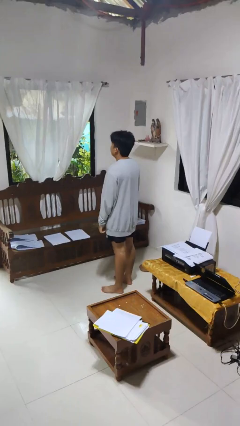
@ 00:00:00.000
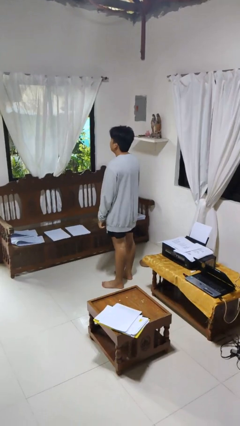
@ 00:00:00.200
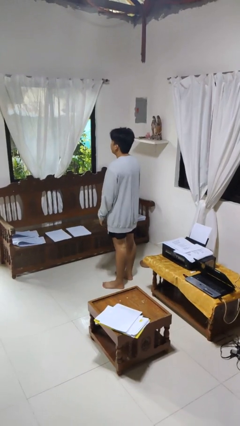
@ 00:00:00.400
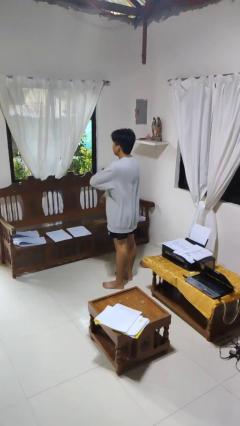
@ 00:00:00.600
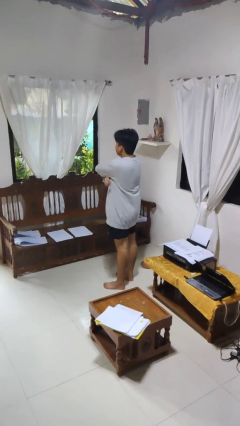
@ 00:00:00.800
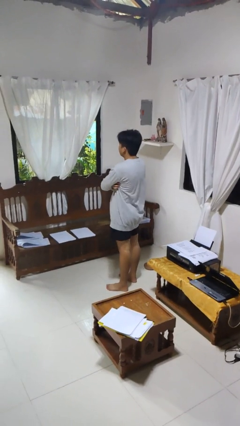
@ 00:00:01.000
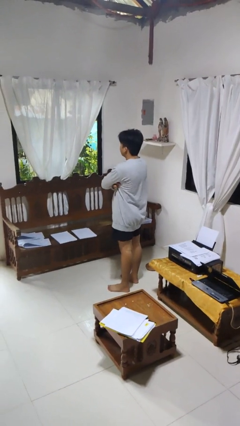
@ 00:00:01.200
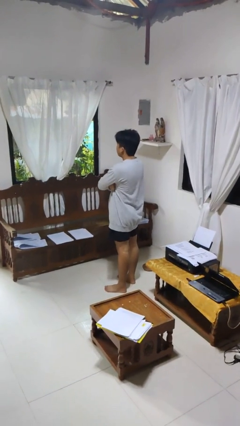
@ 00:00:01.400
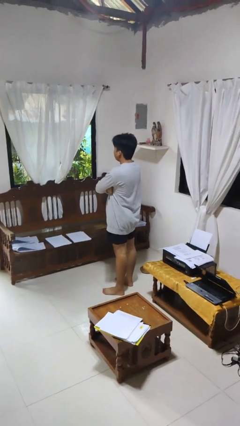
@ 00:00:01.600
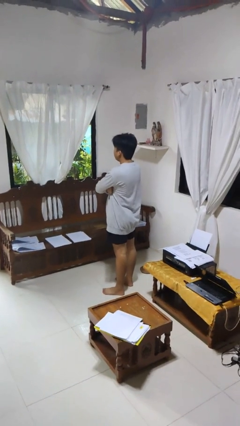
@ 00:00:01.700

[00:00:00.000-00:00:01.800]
person gestures arms x

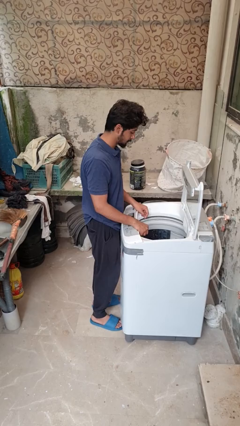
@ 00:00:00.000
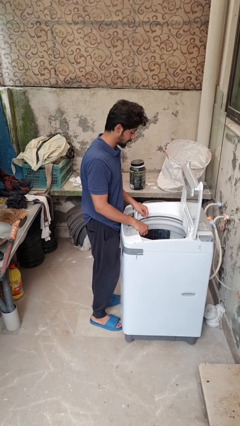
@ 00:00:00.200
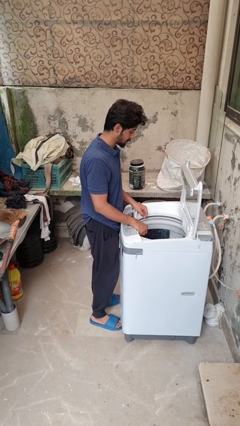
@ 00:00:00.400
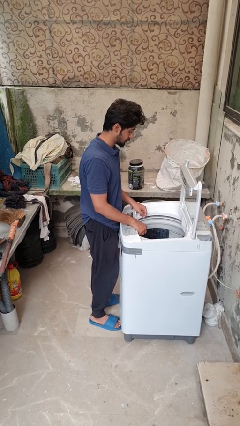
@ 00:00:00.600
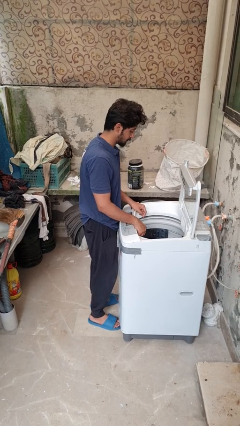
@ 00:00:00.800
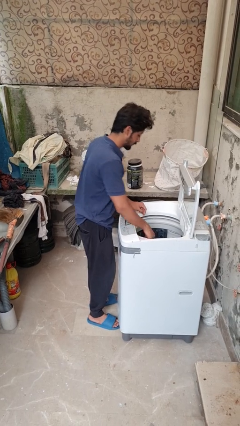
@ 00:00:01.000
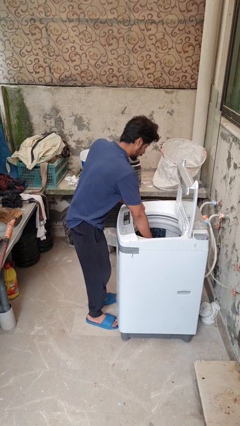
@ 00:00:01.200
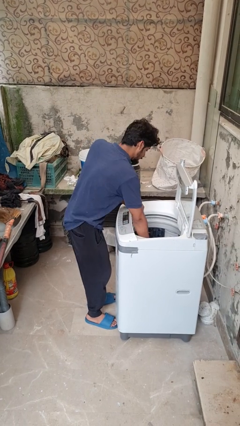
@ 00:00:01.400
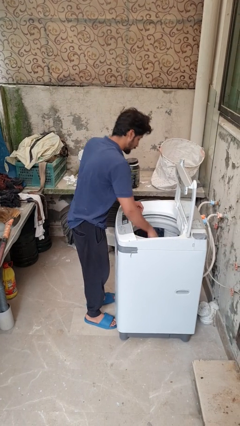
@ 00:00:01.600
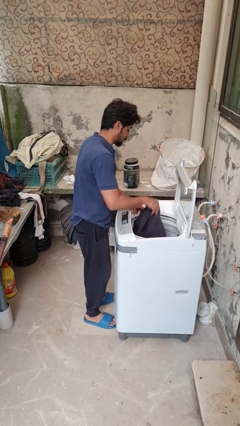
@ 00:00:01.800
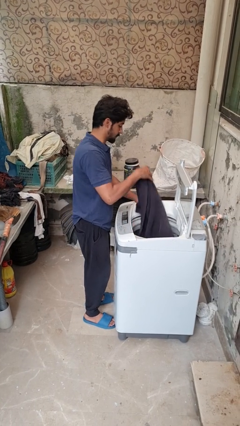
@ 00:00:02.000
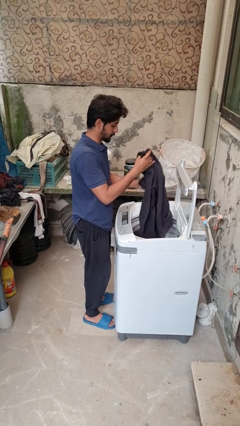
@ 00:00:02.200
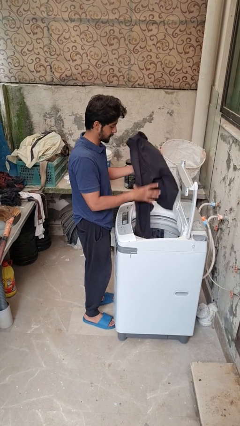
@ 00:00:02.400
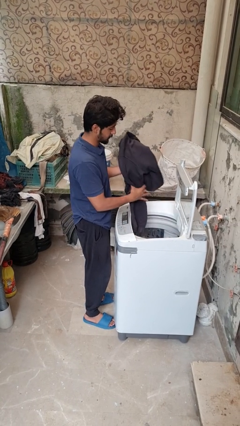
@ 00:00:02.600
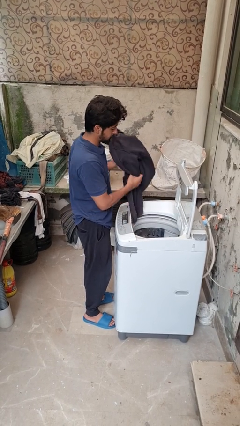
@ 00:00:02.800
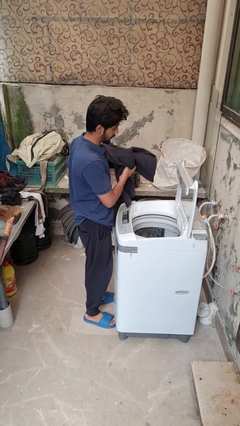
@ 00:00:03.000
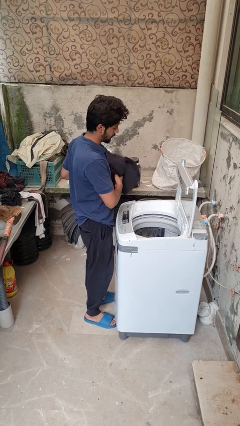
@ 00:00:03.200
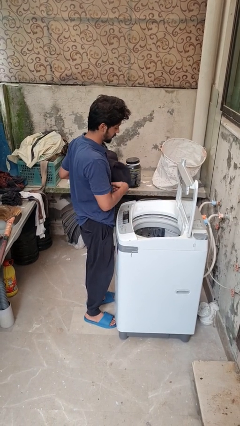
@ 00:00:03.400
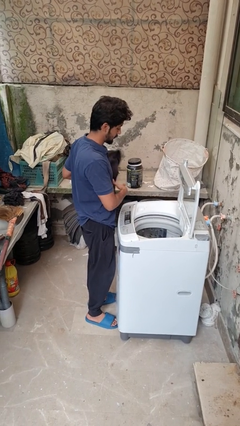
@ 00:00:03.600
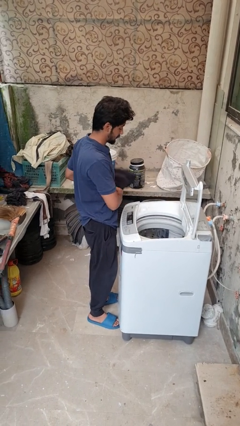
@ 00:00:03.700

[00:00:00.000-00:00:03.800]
person unloads dryer

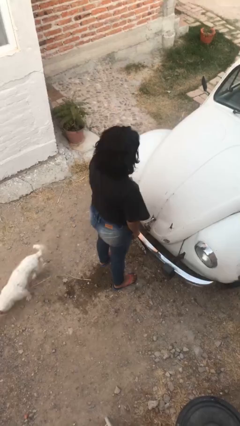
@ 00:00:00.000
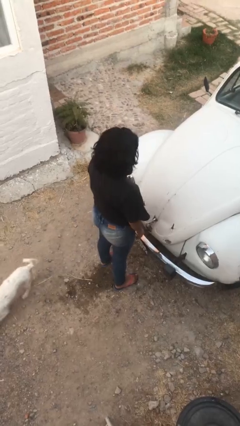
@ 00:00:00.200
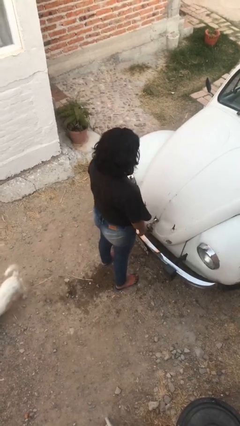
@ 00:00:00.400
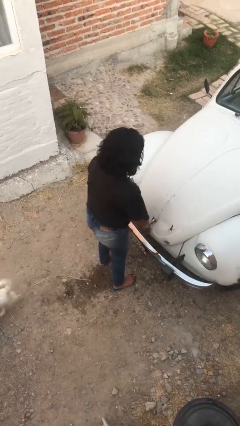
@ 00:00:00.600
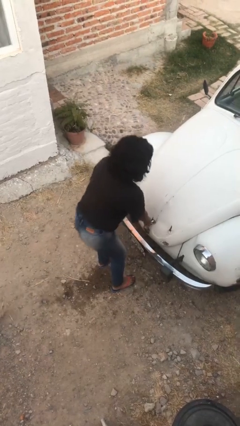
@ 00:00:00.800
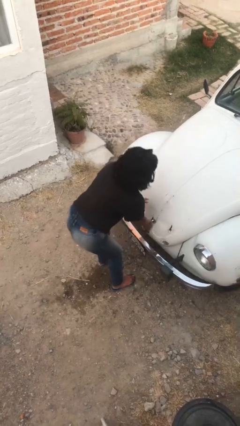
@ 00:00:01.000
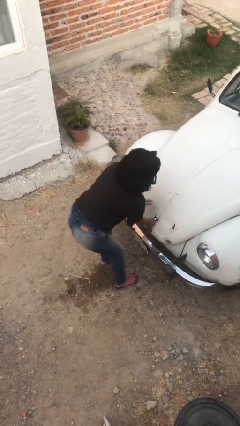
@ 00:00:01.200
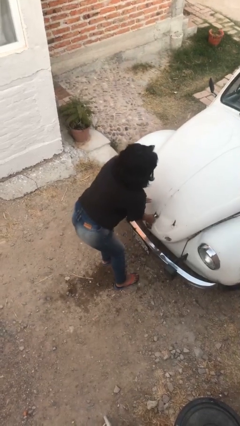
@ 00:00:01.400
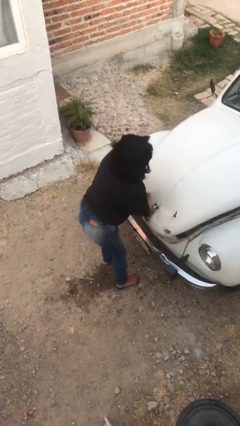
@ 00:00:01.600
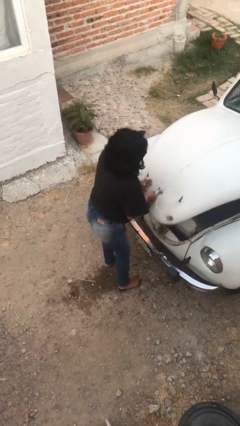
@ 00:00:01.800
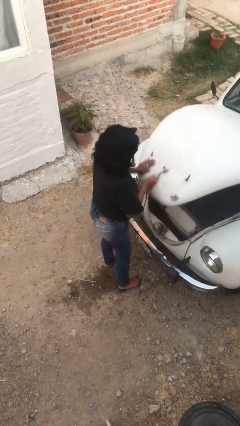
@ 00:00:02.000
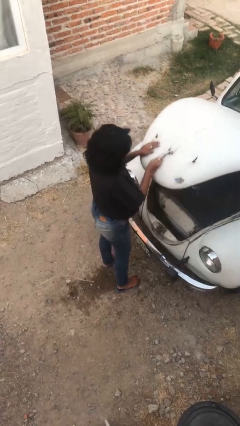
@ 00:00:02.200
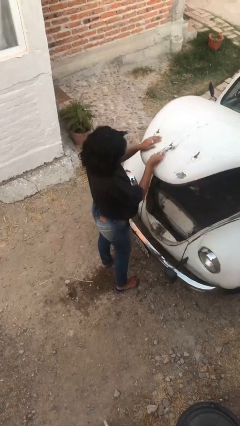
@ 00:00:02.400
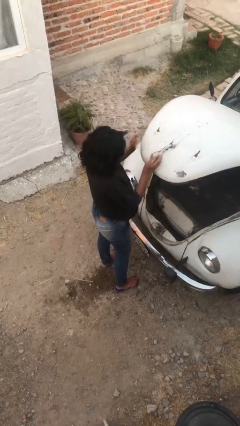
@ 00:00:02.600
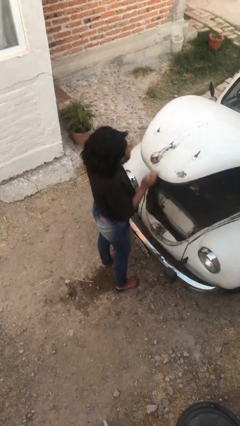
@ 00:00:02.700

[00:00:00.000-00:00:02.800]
person opens car trunk

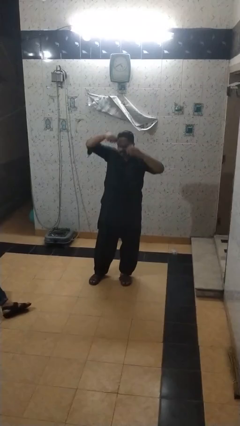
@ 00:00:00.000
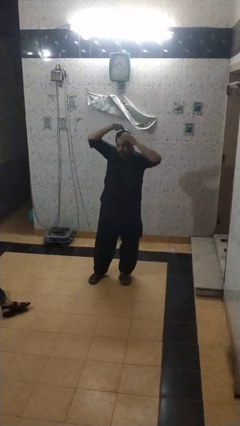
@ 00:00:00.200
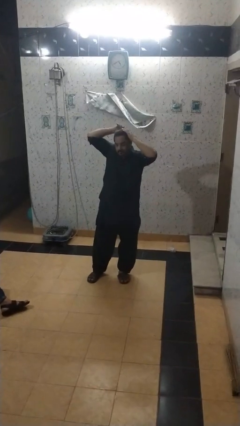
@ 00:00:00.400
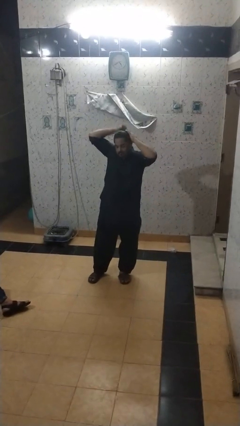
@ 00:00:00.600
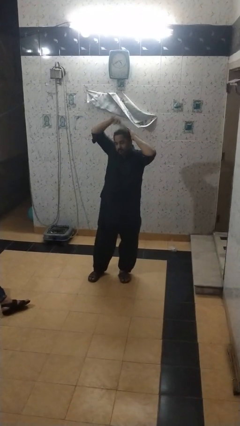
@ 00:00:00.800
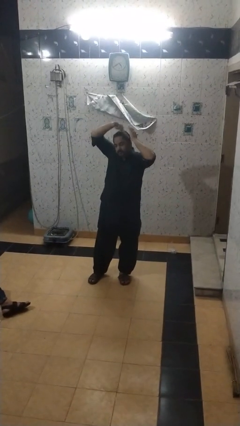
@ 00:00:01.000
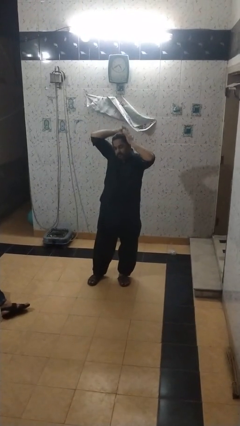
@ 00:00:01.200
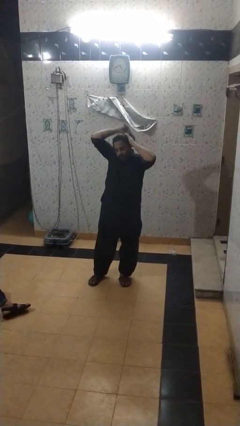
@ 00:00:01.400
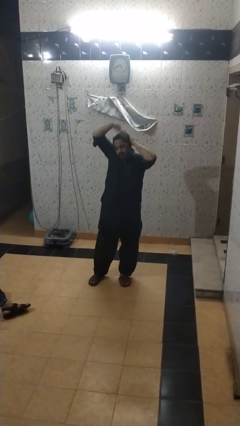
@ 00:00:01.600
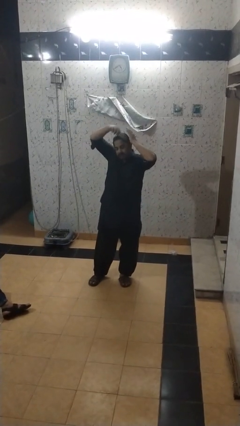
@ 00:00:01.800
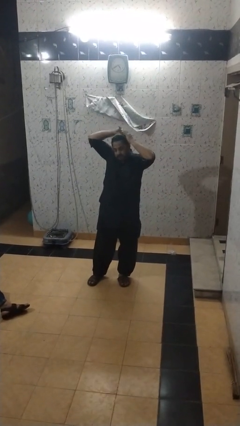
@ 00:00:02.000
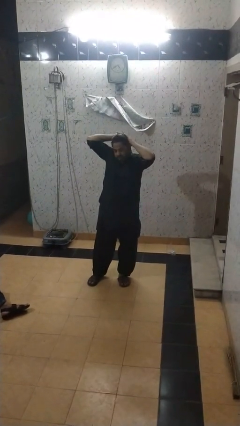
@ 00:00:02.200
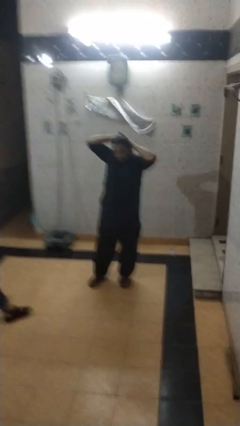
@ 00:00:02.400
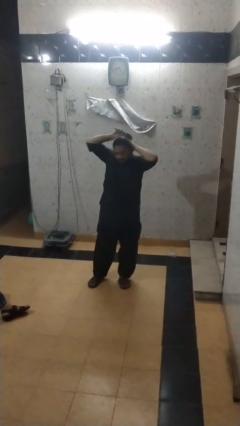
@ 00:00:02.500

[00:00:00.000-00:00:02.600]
person brushes hair

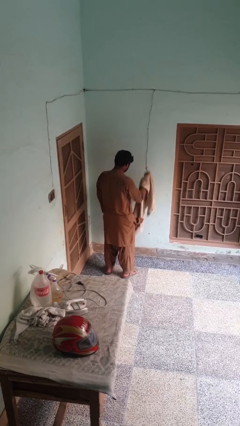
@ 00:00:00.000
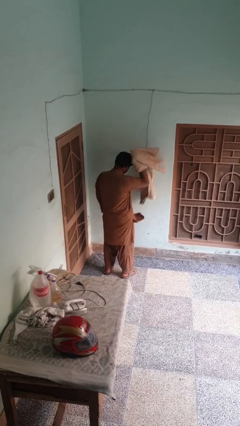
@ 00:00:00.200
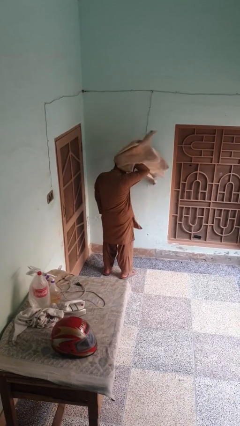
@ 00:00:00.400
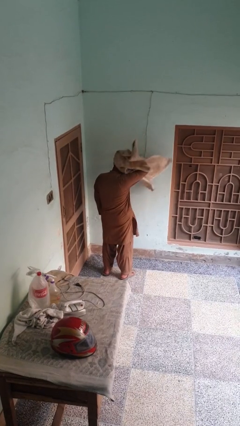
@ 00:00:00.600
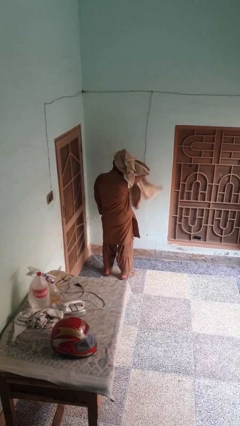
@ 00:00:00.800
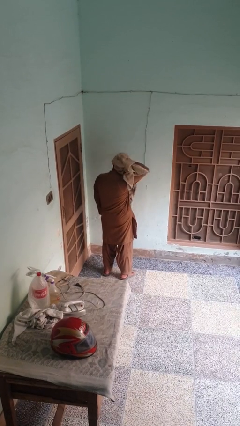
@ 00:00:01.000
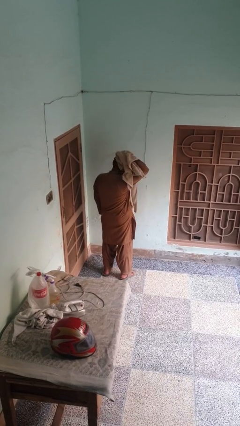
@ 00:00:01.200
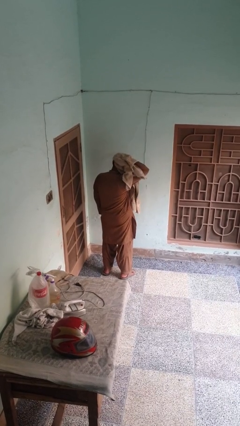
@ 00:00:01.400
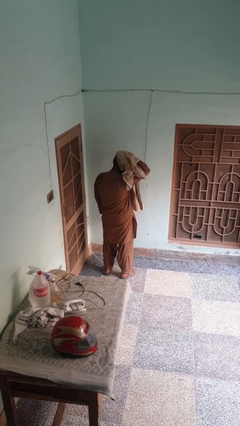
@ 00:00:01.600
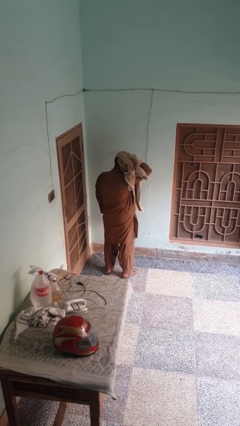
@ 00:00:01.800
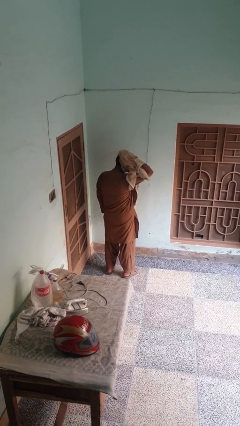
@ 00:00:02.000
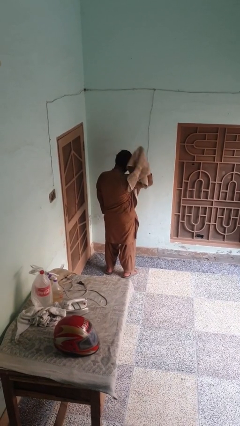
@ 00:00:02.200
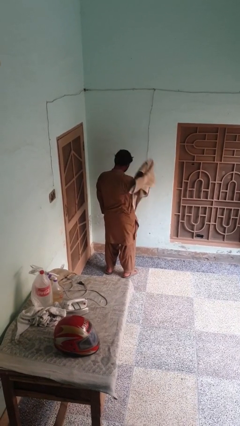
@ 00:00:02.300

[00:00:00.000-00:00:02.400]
person dries hair with towel

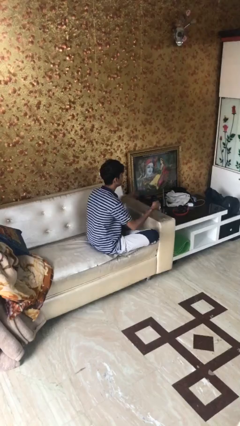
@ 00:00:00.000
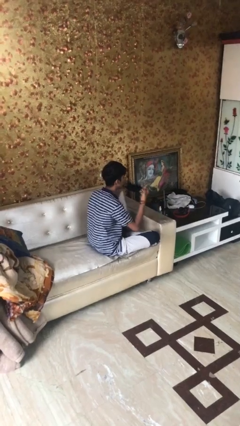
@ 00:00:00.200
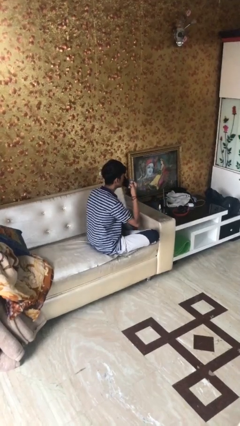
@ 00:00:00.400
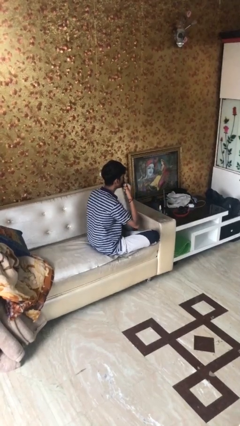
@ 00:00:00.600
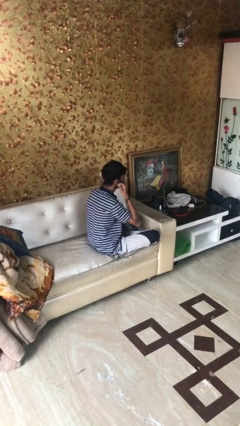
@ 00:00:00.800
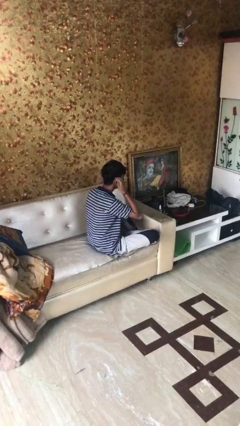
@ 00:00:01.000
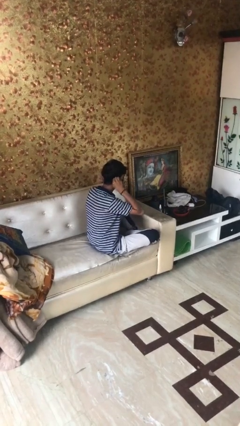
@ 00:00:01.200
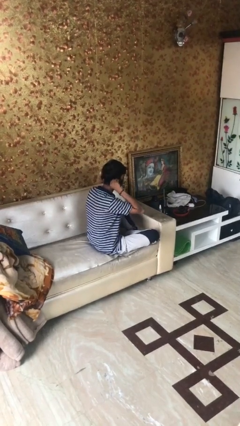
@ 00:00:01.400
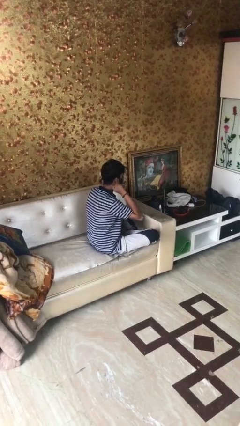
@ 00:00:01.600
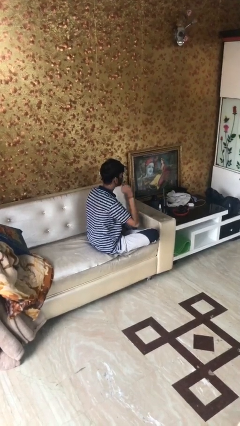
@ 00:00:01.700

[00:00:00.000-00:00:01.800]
person puts on facemask

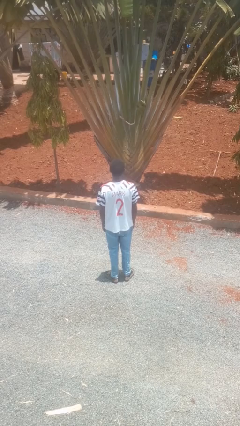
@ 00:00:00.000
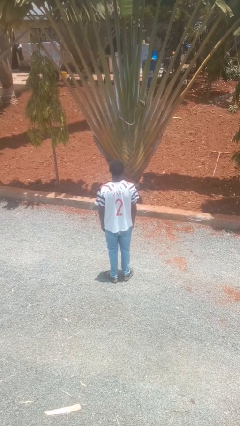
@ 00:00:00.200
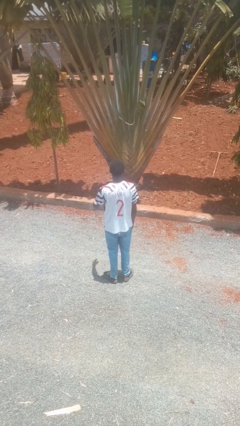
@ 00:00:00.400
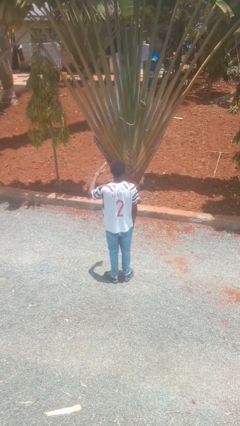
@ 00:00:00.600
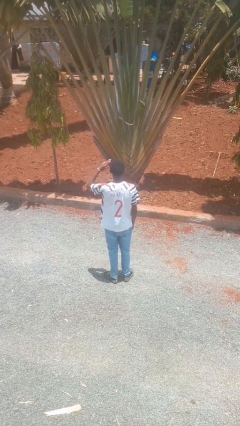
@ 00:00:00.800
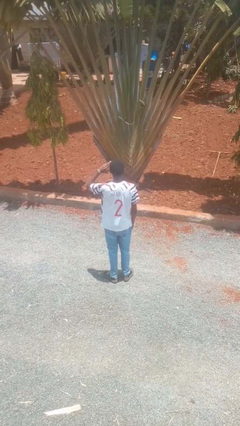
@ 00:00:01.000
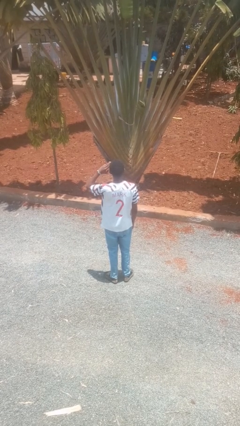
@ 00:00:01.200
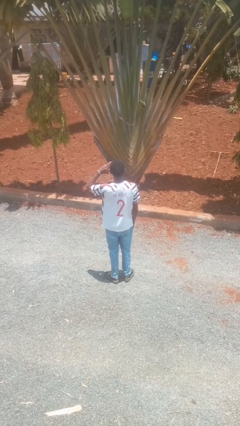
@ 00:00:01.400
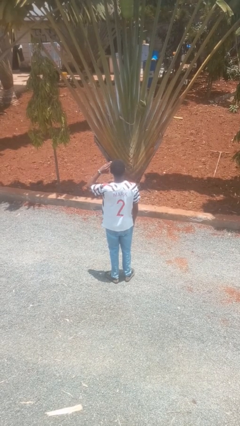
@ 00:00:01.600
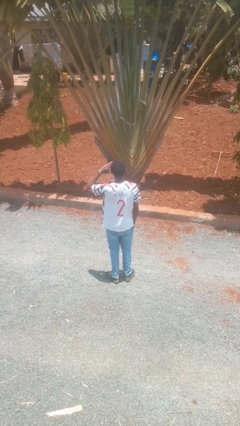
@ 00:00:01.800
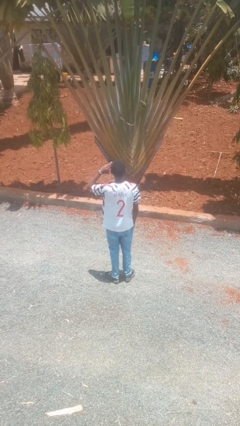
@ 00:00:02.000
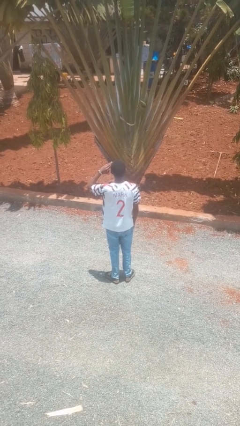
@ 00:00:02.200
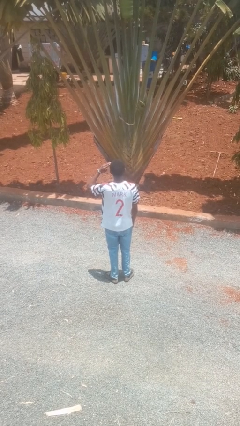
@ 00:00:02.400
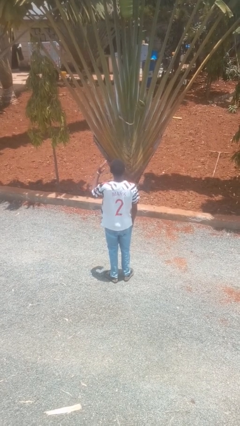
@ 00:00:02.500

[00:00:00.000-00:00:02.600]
person salutes
